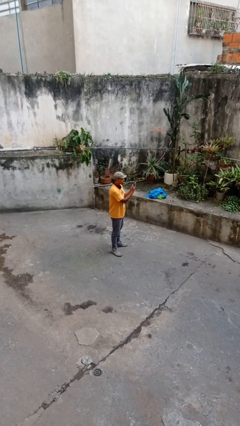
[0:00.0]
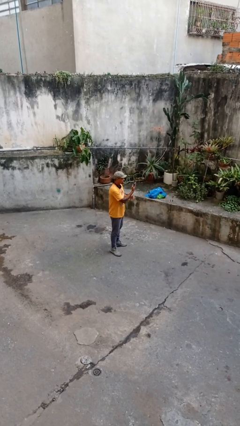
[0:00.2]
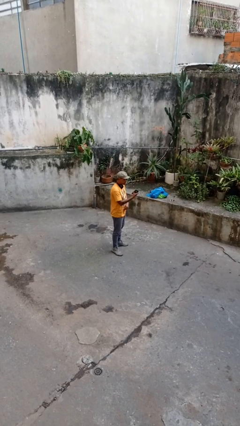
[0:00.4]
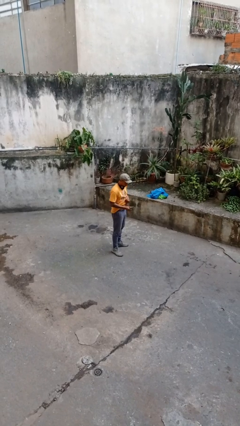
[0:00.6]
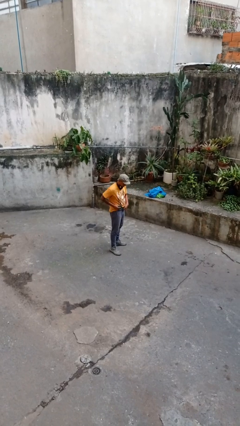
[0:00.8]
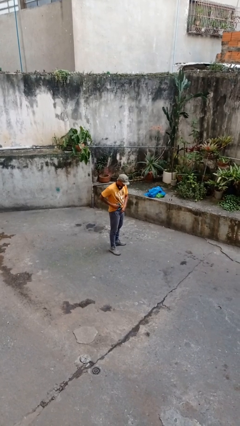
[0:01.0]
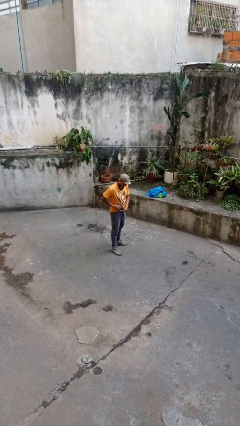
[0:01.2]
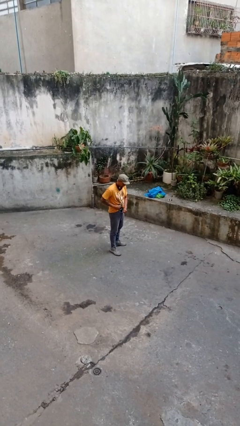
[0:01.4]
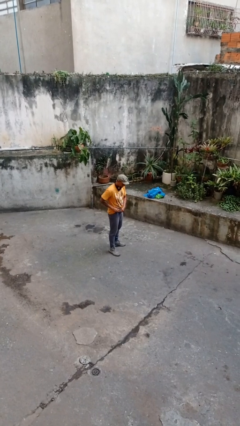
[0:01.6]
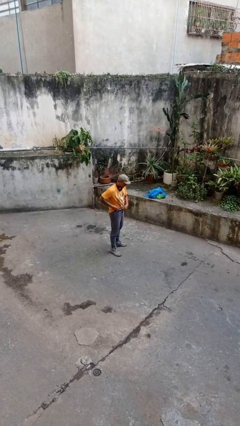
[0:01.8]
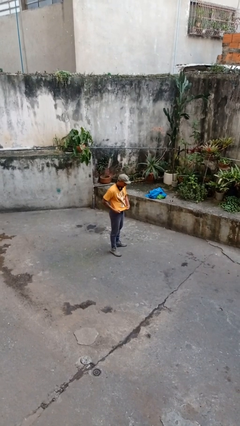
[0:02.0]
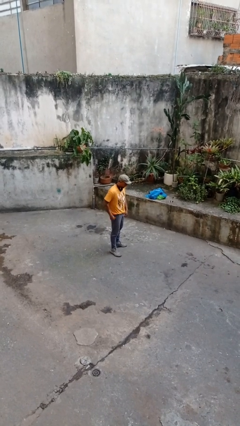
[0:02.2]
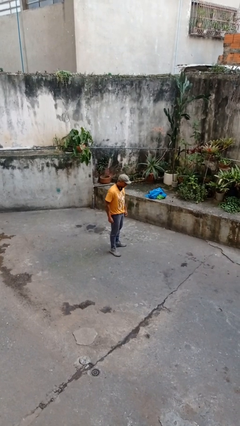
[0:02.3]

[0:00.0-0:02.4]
person puts phone into pocket

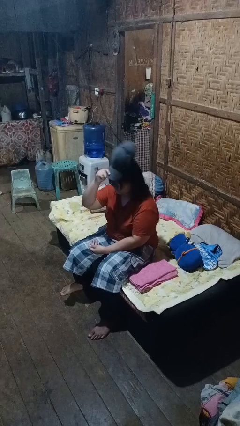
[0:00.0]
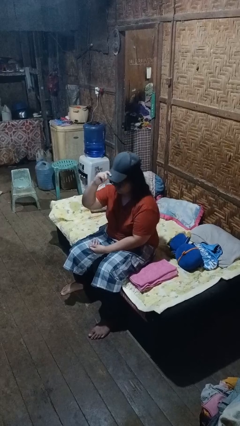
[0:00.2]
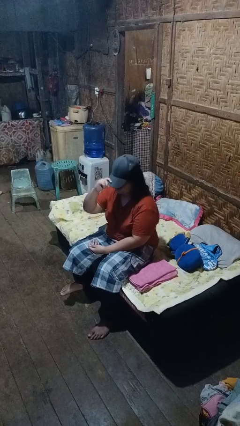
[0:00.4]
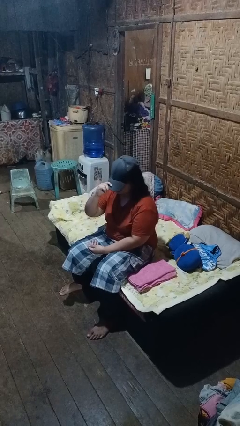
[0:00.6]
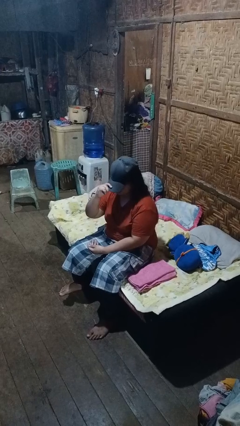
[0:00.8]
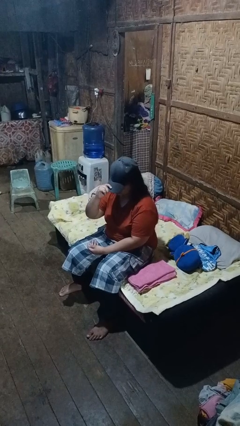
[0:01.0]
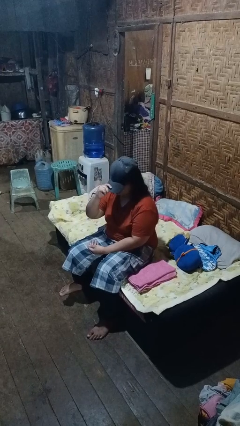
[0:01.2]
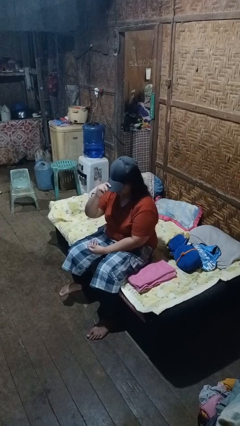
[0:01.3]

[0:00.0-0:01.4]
person puts on hat

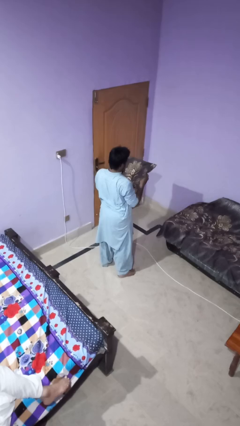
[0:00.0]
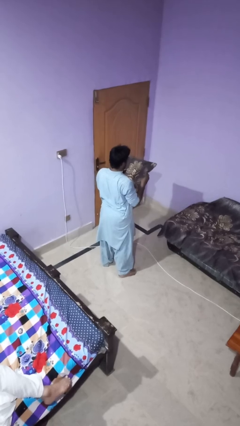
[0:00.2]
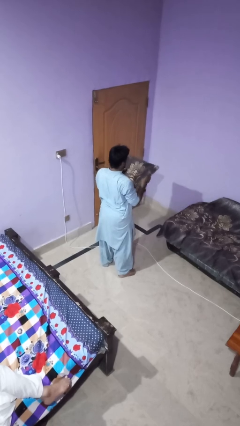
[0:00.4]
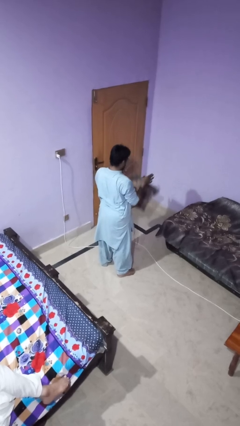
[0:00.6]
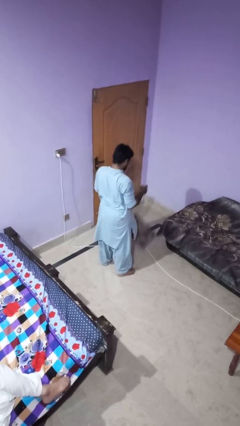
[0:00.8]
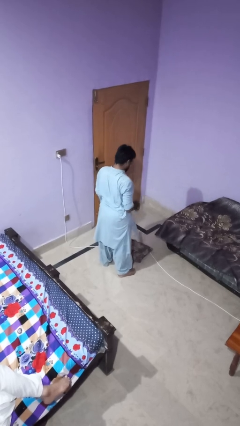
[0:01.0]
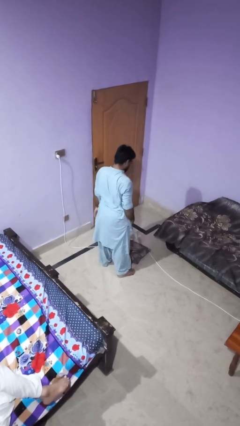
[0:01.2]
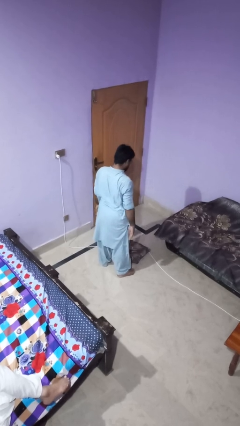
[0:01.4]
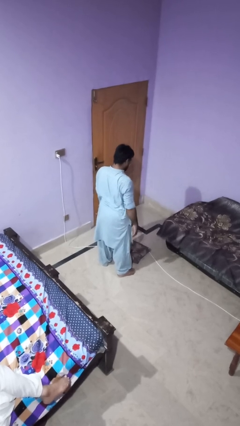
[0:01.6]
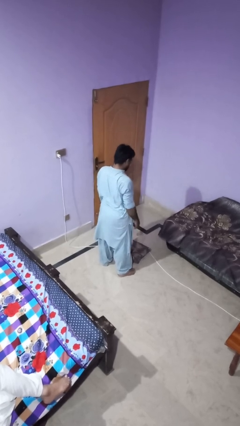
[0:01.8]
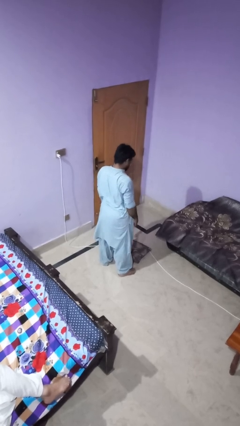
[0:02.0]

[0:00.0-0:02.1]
person drops object

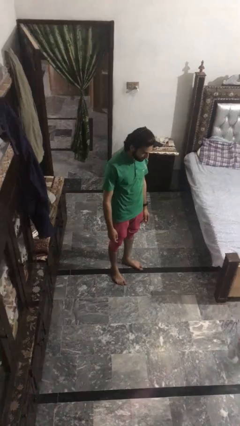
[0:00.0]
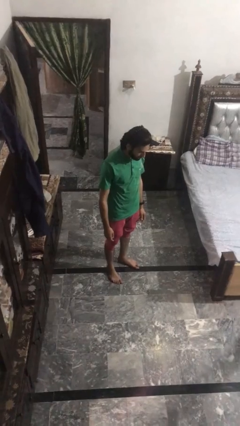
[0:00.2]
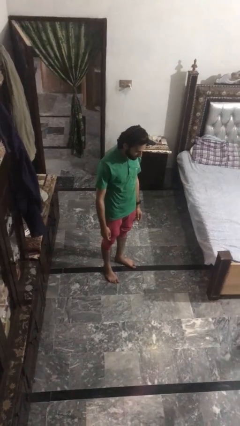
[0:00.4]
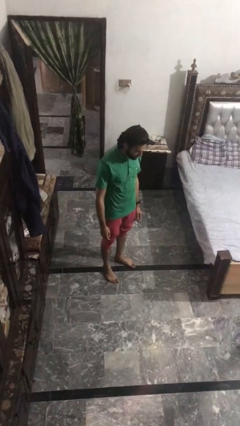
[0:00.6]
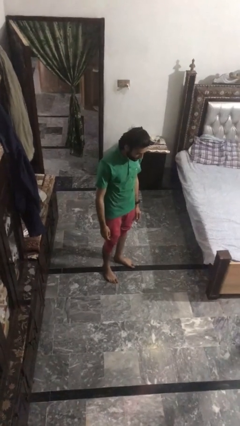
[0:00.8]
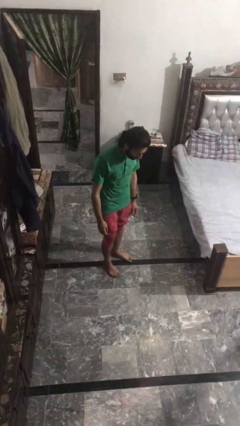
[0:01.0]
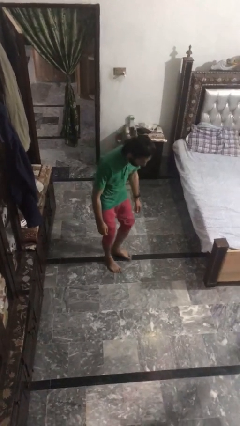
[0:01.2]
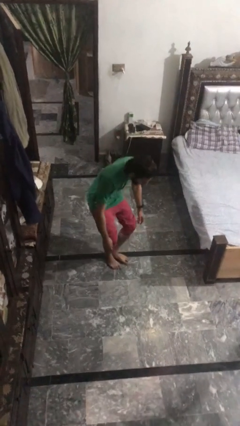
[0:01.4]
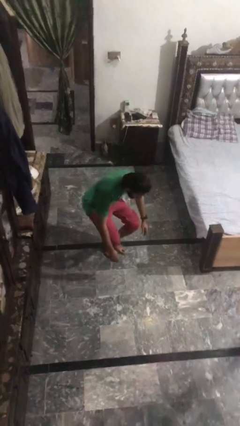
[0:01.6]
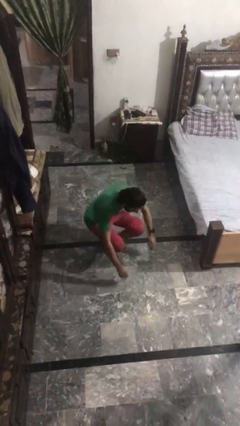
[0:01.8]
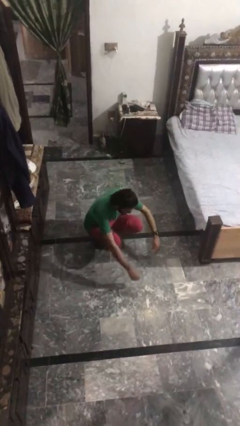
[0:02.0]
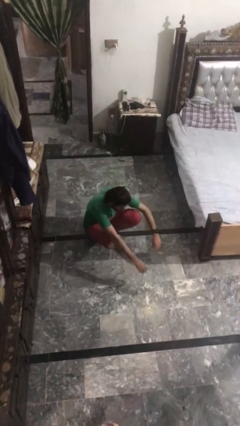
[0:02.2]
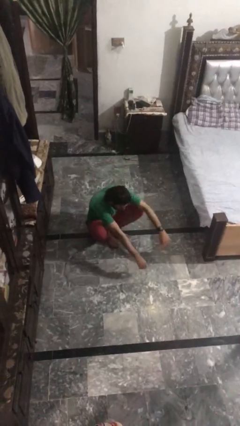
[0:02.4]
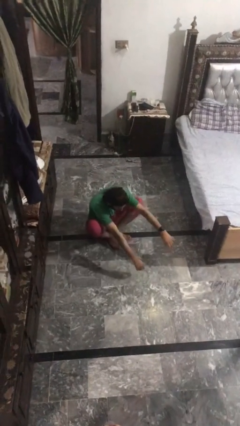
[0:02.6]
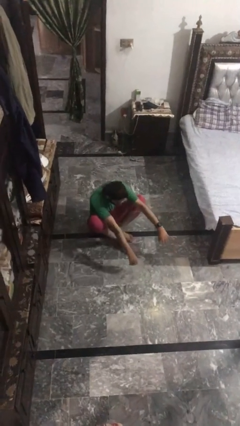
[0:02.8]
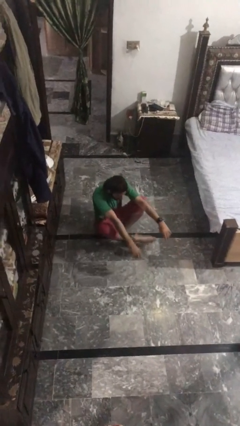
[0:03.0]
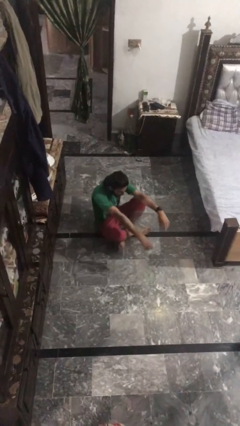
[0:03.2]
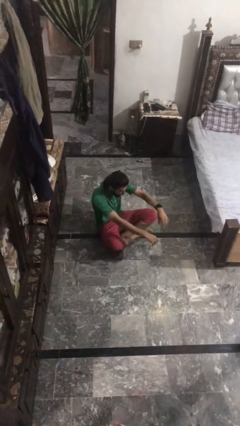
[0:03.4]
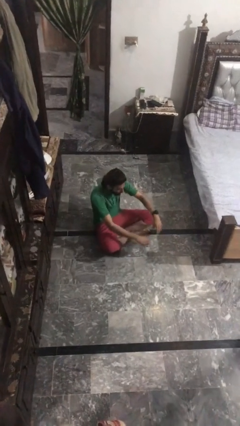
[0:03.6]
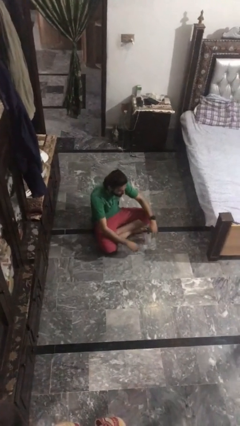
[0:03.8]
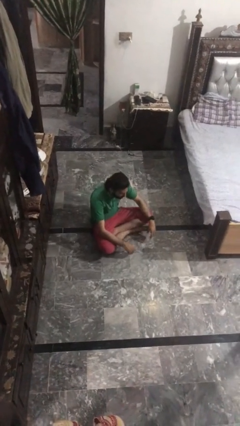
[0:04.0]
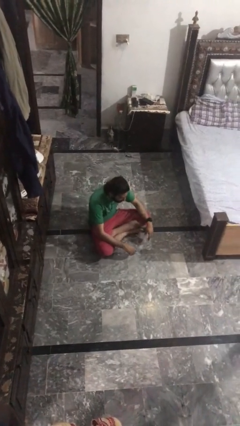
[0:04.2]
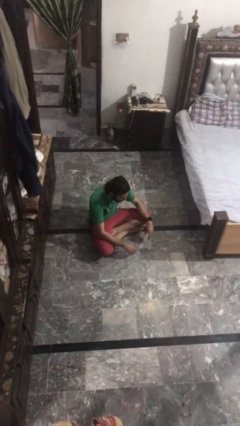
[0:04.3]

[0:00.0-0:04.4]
person sits crisscross

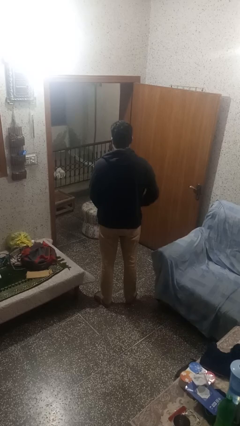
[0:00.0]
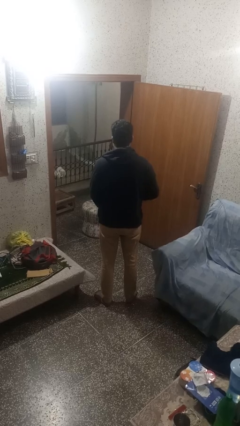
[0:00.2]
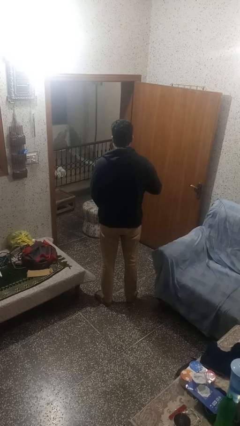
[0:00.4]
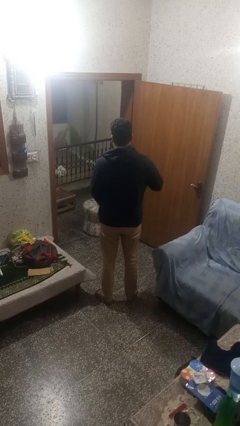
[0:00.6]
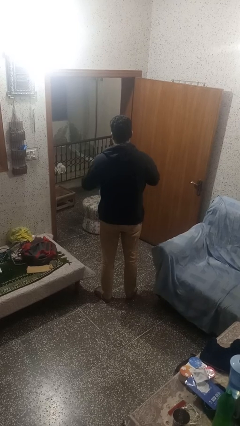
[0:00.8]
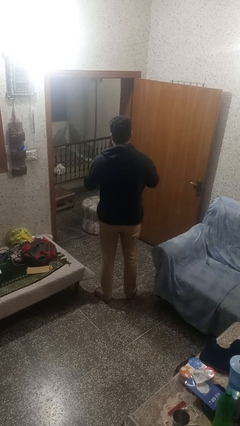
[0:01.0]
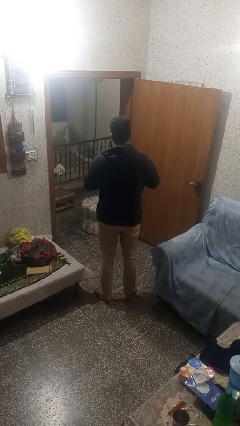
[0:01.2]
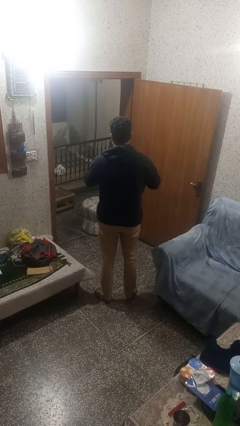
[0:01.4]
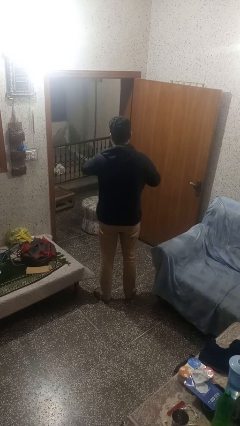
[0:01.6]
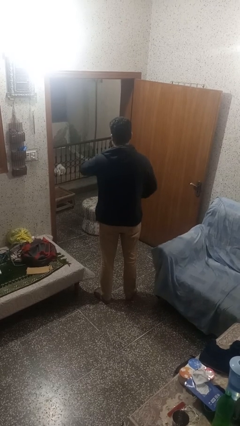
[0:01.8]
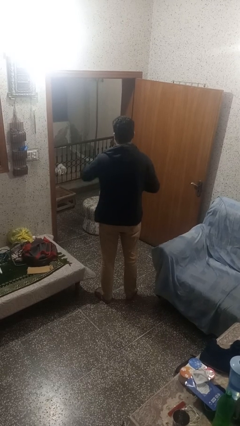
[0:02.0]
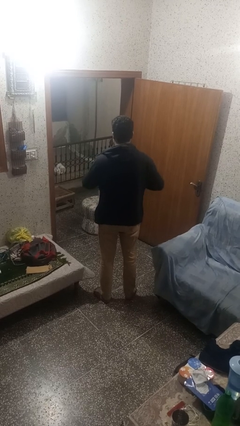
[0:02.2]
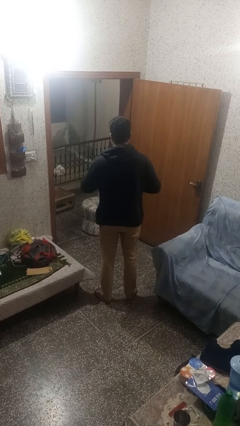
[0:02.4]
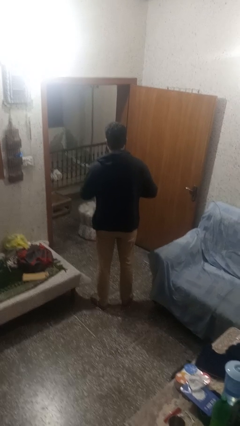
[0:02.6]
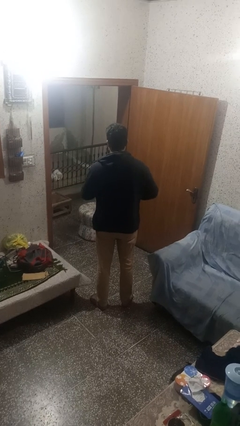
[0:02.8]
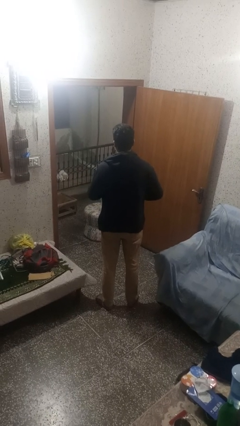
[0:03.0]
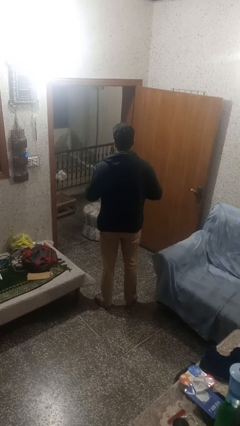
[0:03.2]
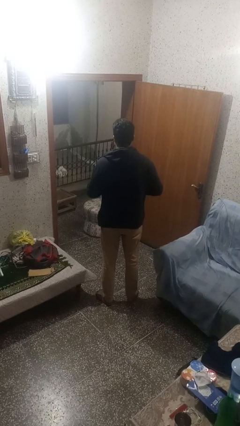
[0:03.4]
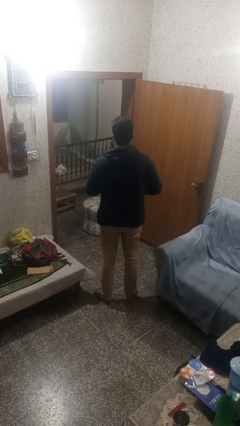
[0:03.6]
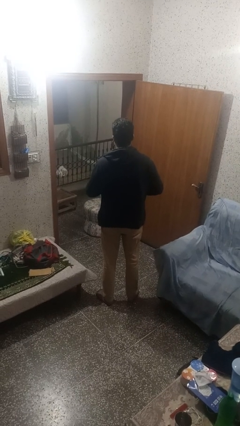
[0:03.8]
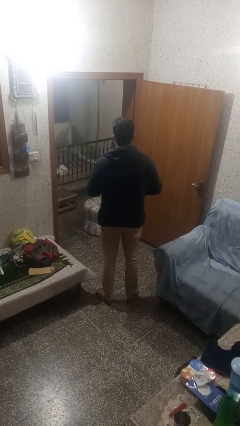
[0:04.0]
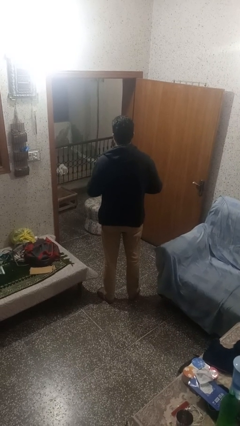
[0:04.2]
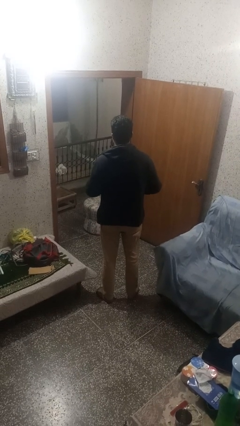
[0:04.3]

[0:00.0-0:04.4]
person unzips jacket

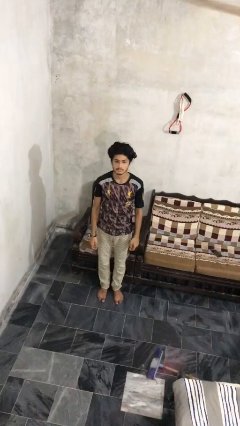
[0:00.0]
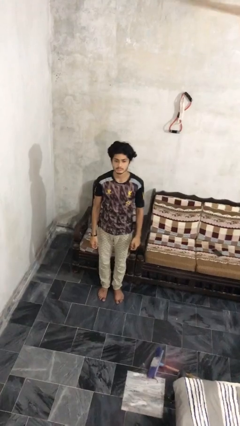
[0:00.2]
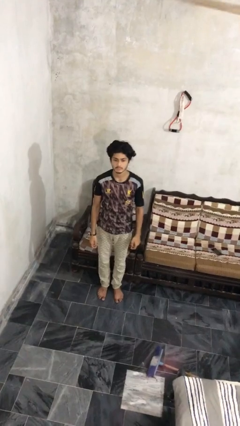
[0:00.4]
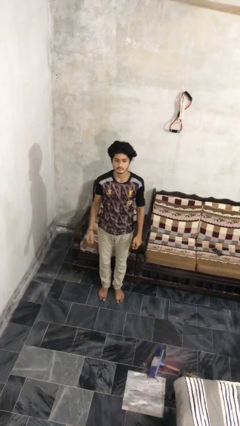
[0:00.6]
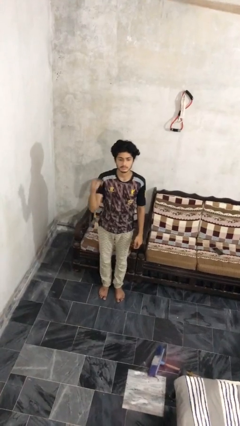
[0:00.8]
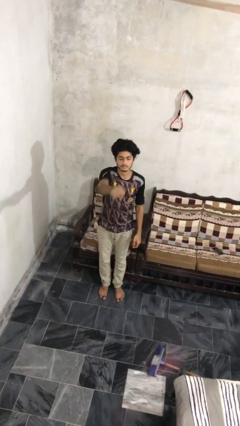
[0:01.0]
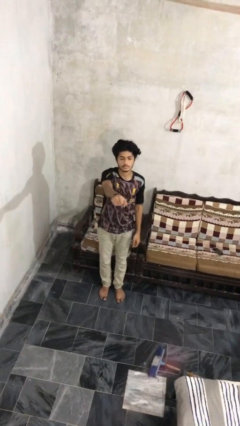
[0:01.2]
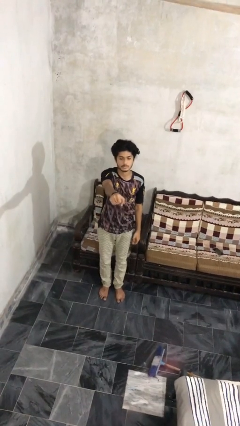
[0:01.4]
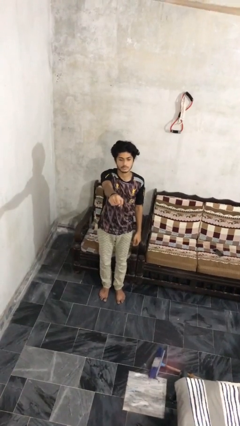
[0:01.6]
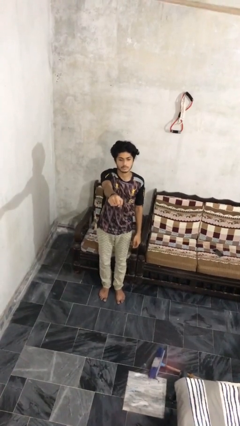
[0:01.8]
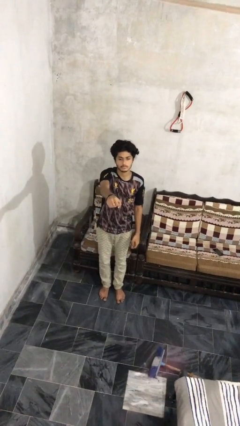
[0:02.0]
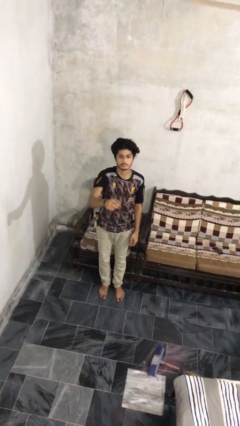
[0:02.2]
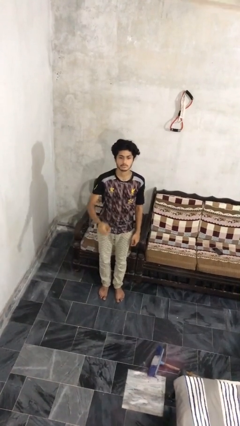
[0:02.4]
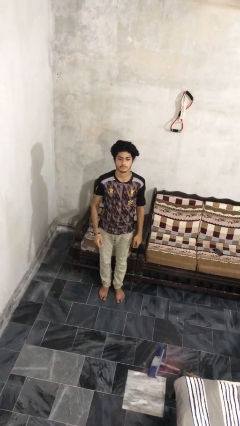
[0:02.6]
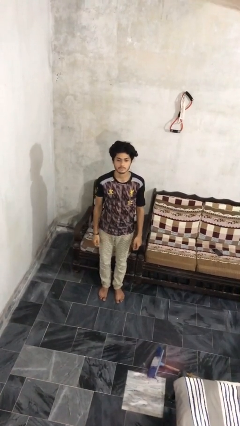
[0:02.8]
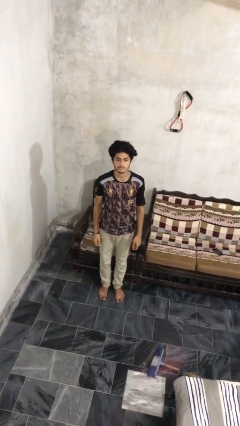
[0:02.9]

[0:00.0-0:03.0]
person punches
